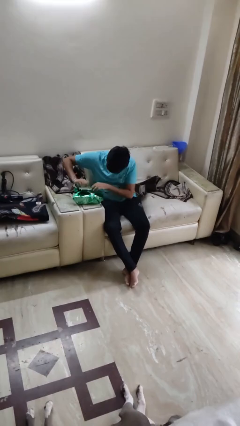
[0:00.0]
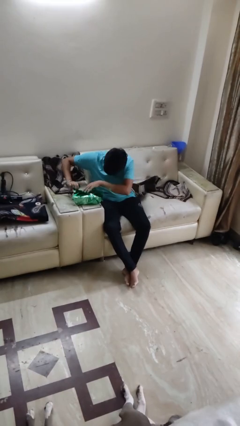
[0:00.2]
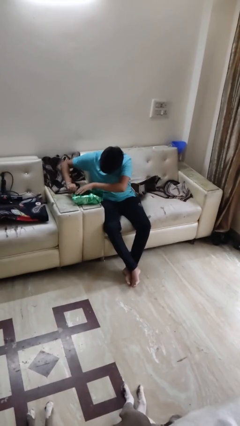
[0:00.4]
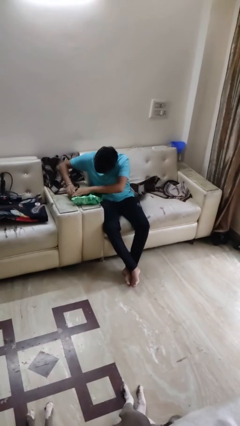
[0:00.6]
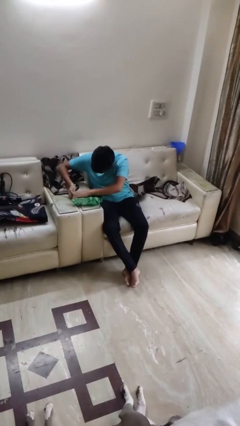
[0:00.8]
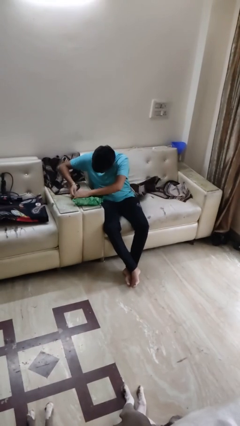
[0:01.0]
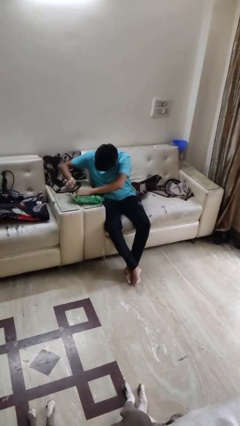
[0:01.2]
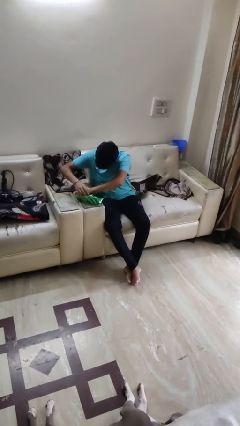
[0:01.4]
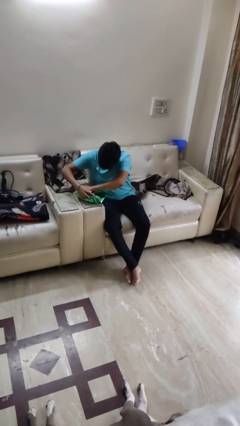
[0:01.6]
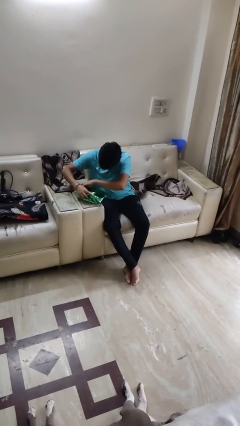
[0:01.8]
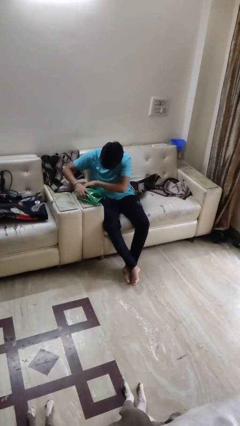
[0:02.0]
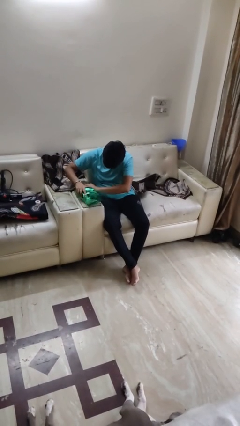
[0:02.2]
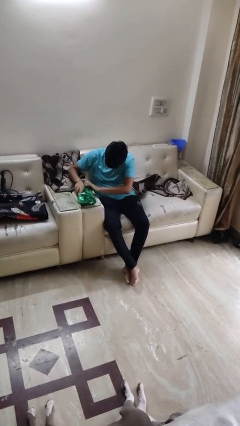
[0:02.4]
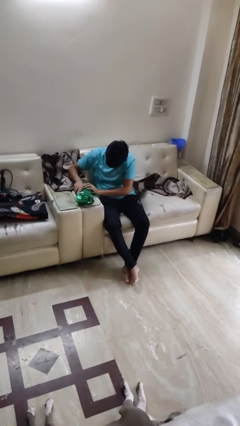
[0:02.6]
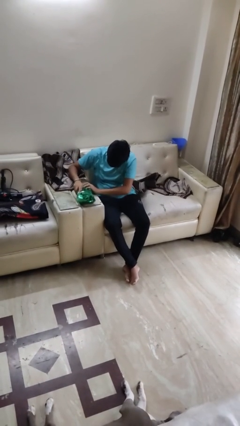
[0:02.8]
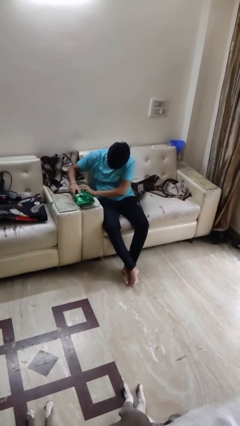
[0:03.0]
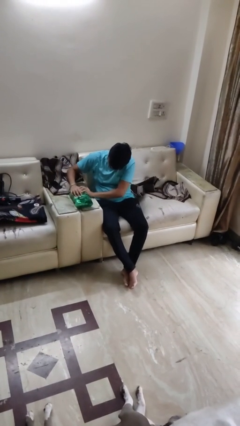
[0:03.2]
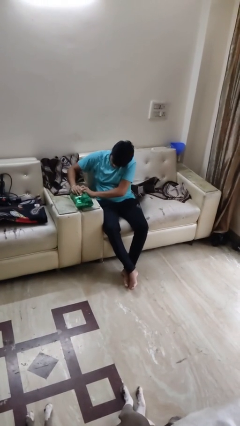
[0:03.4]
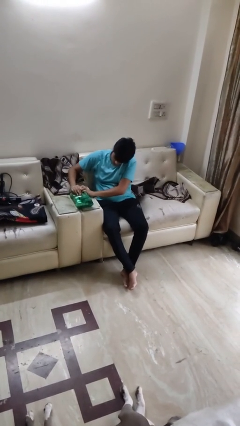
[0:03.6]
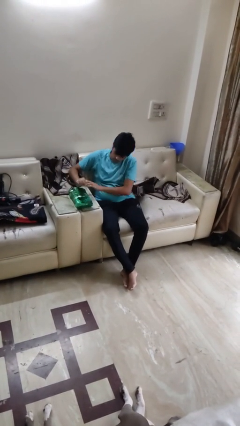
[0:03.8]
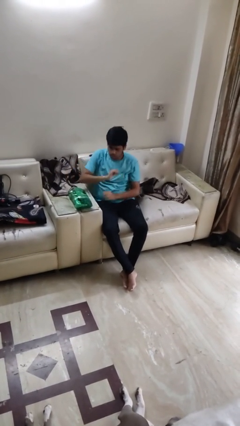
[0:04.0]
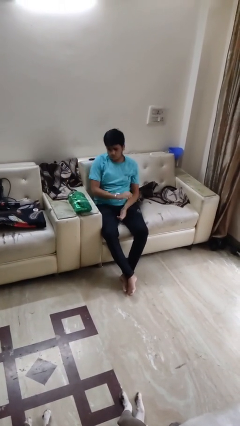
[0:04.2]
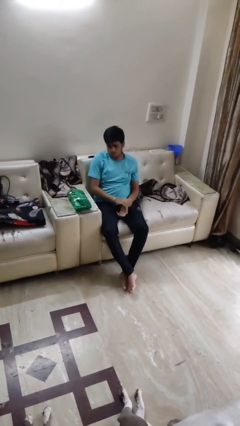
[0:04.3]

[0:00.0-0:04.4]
person wraps box

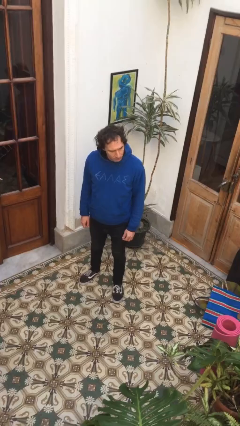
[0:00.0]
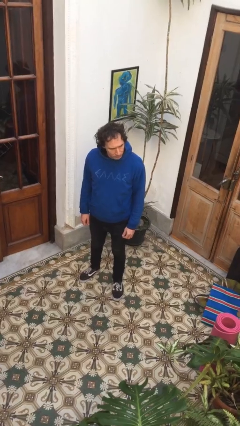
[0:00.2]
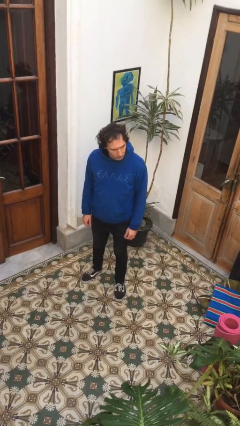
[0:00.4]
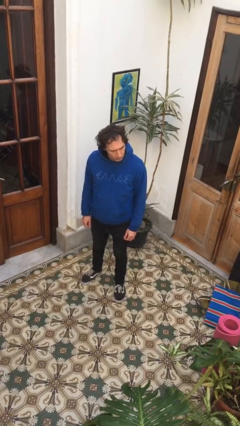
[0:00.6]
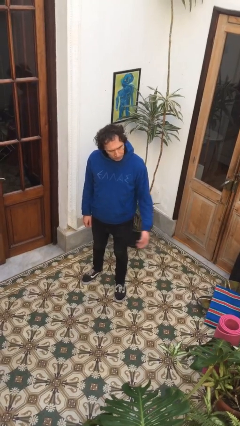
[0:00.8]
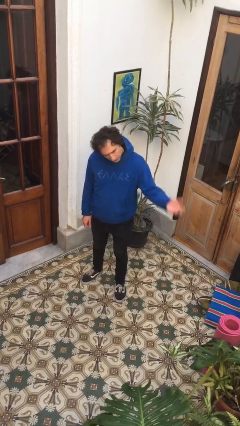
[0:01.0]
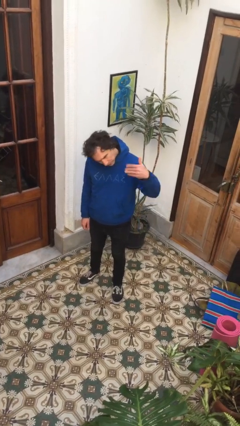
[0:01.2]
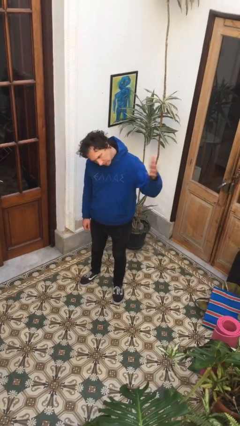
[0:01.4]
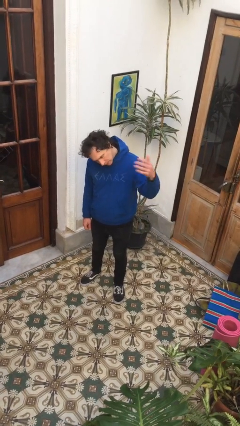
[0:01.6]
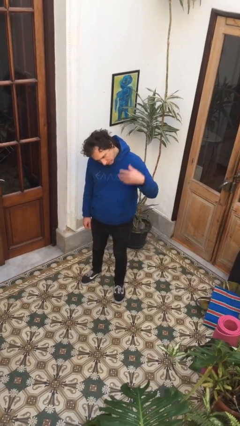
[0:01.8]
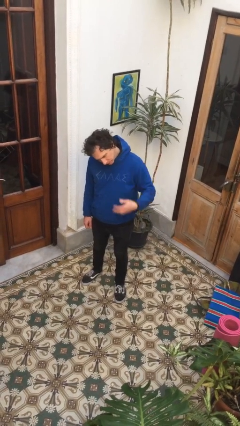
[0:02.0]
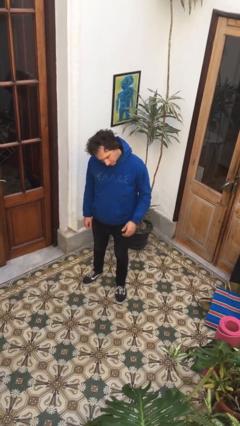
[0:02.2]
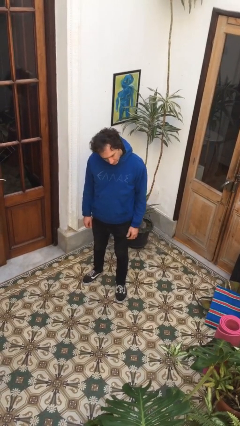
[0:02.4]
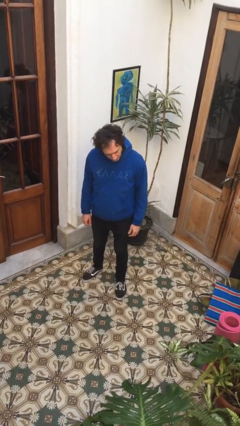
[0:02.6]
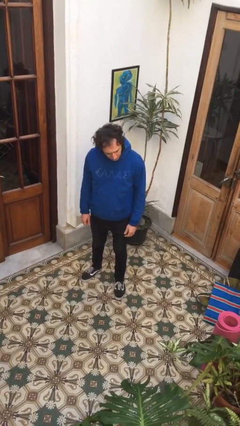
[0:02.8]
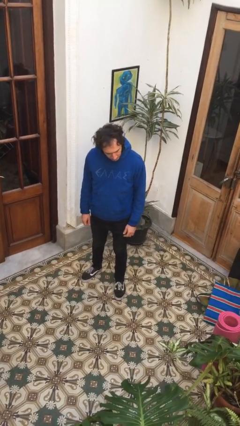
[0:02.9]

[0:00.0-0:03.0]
person gestures come here

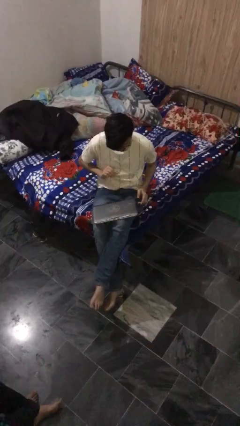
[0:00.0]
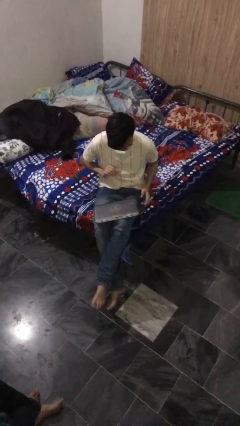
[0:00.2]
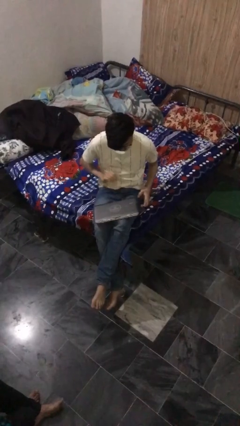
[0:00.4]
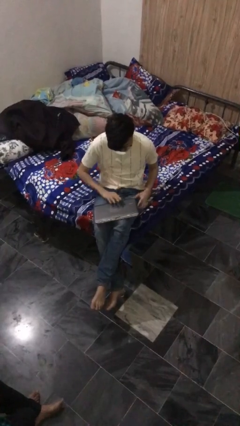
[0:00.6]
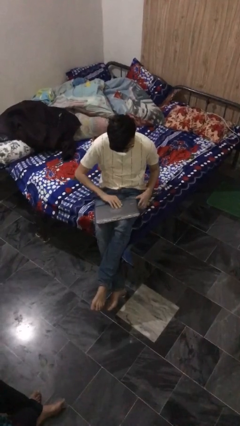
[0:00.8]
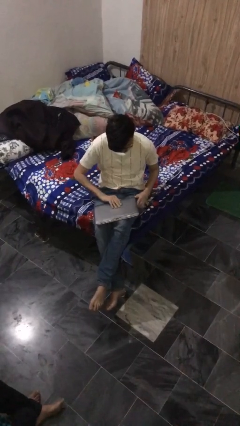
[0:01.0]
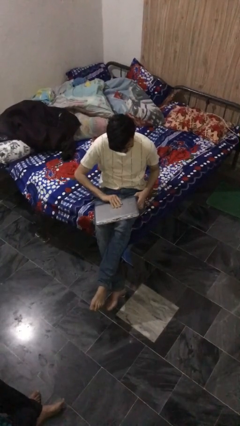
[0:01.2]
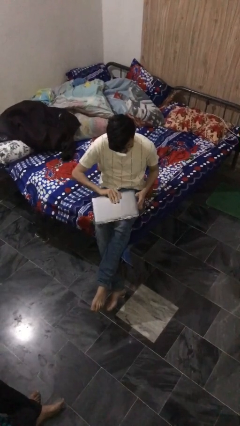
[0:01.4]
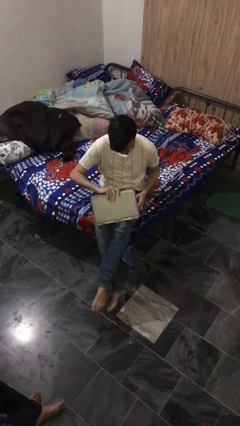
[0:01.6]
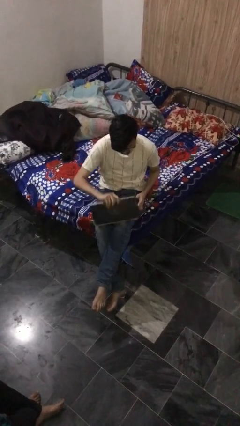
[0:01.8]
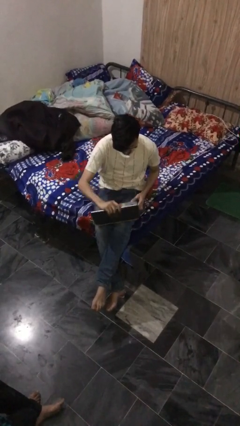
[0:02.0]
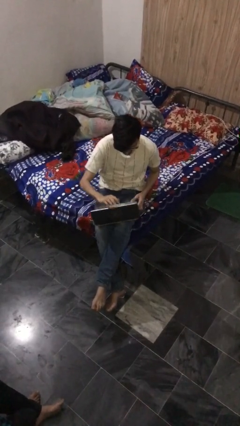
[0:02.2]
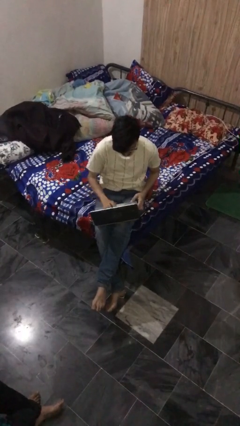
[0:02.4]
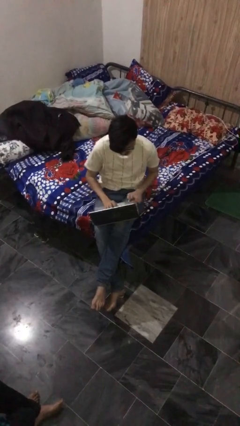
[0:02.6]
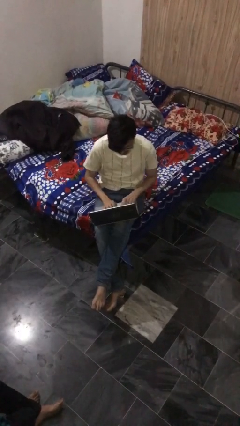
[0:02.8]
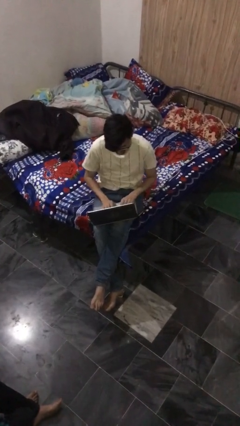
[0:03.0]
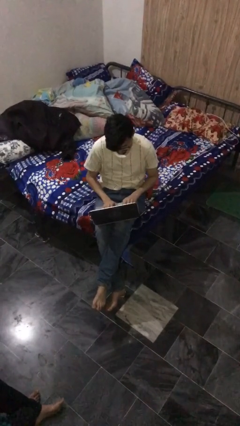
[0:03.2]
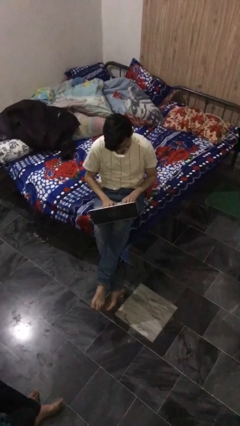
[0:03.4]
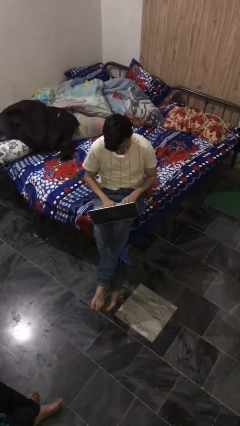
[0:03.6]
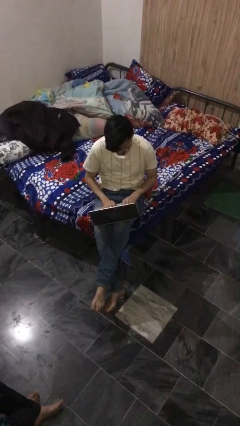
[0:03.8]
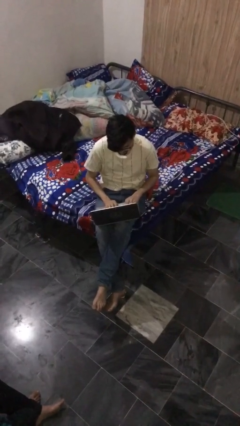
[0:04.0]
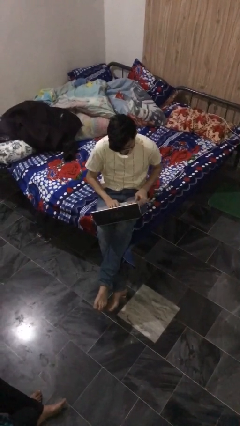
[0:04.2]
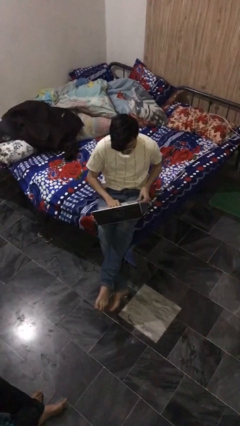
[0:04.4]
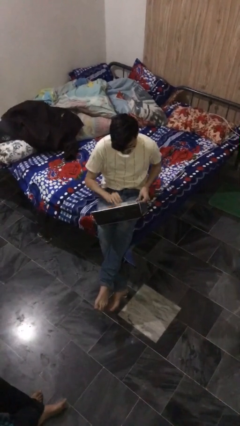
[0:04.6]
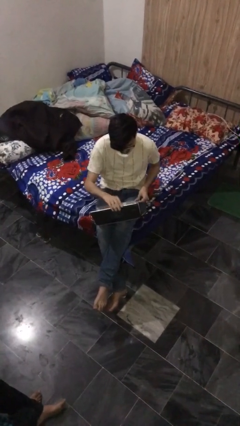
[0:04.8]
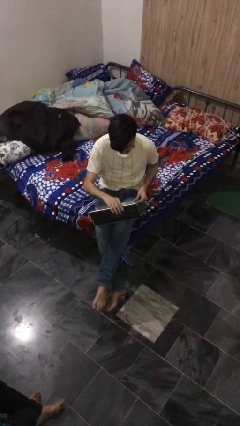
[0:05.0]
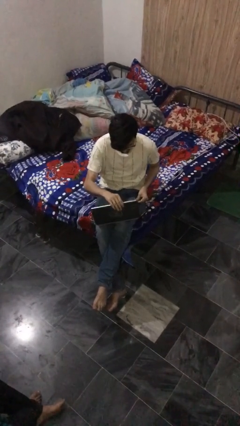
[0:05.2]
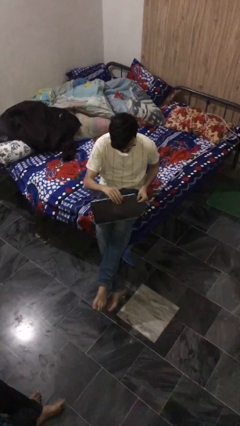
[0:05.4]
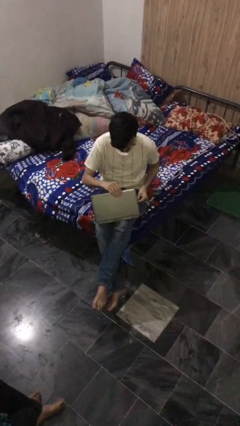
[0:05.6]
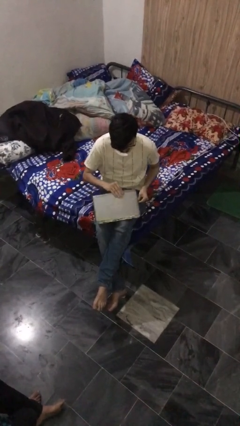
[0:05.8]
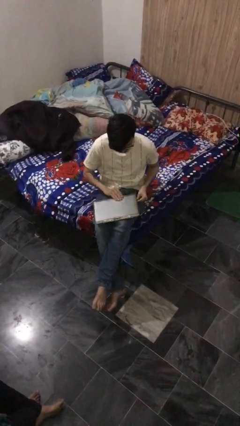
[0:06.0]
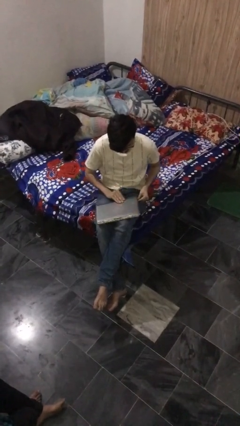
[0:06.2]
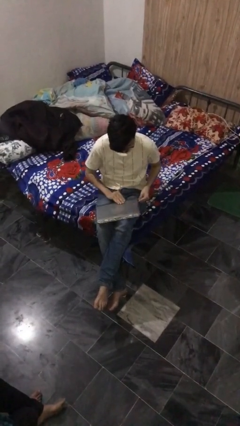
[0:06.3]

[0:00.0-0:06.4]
person interacts with laptop

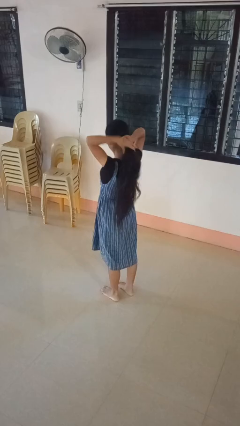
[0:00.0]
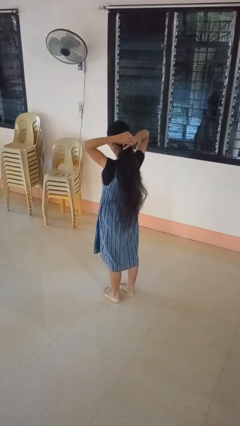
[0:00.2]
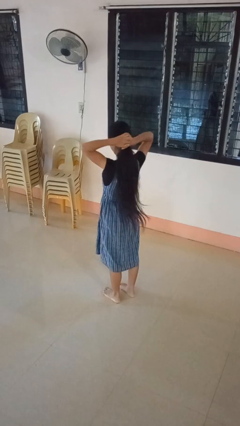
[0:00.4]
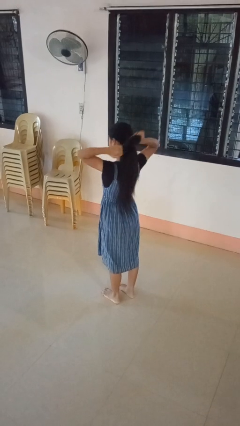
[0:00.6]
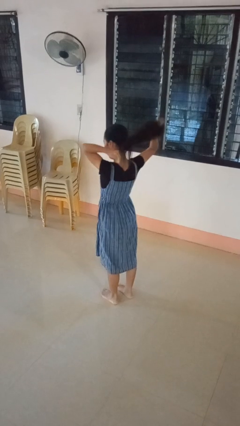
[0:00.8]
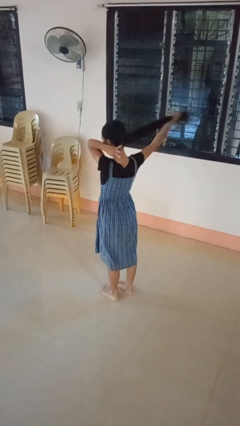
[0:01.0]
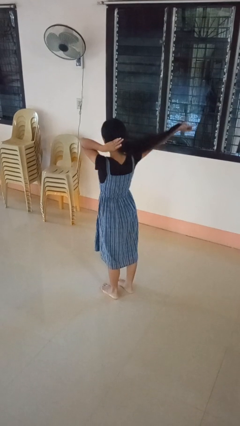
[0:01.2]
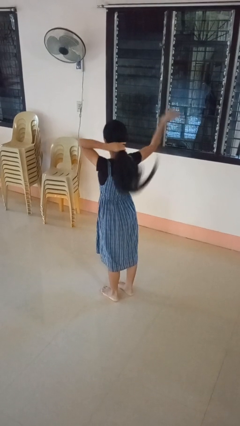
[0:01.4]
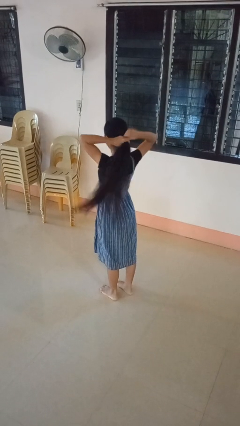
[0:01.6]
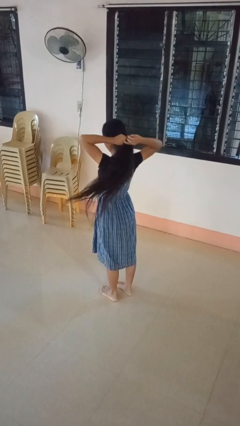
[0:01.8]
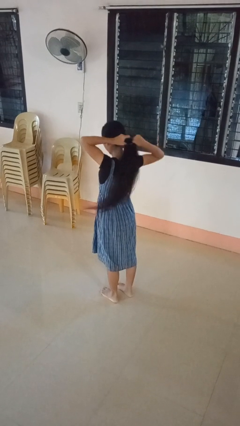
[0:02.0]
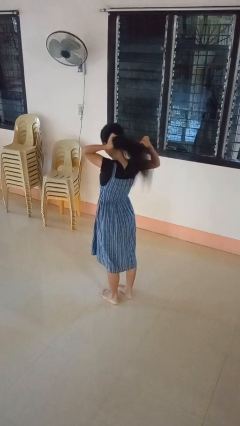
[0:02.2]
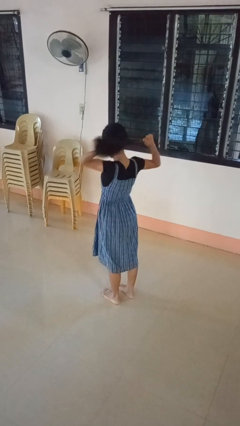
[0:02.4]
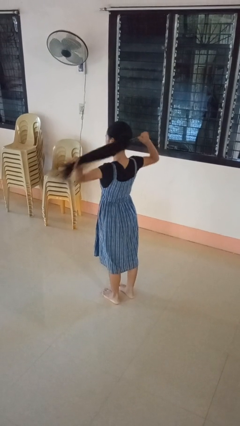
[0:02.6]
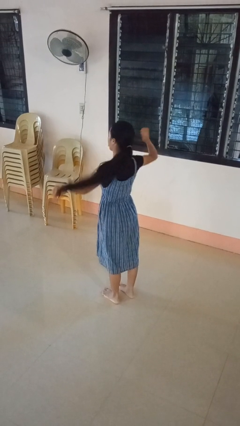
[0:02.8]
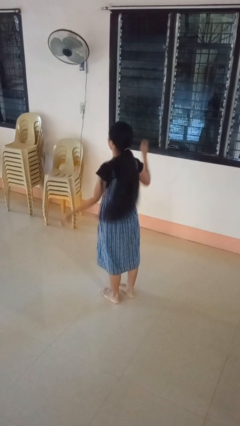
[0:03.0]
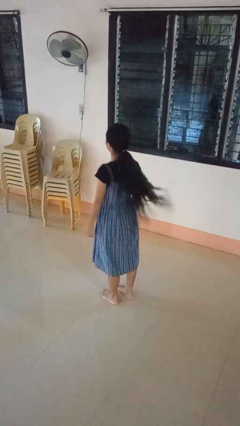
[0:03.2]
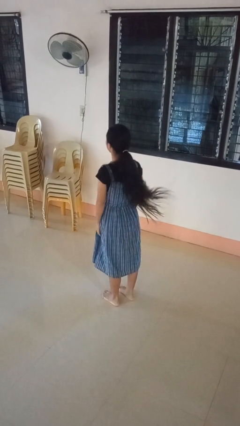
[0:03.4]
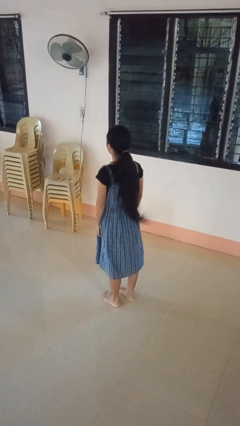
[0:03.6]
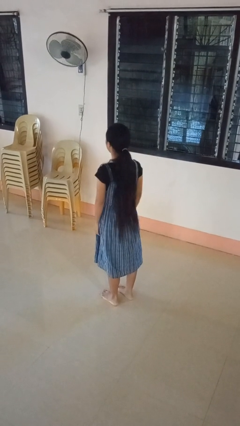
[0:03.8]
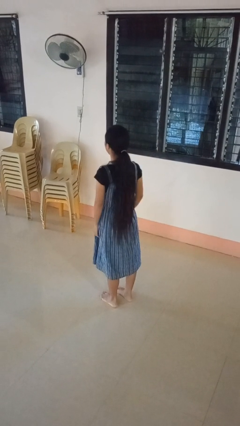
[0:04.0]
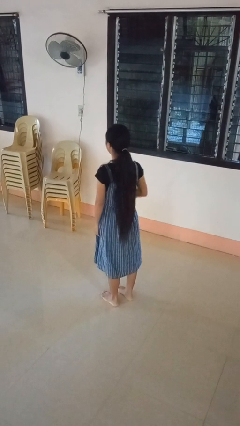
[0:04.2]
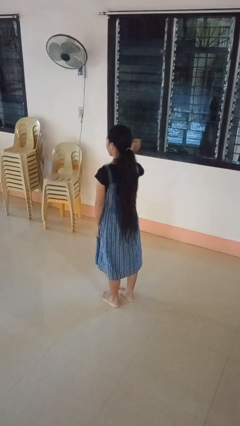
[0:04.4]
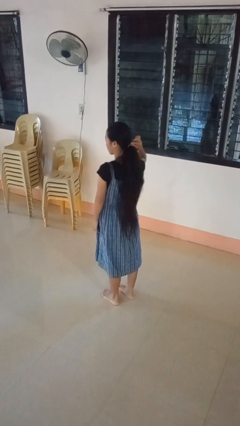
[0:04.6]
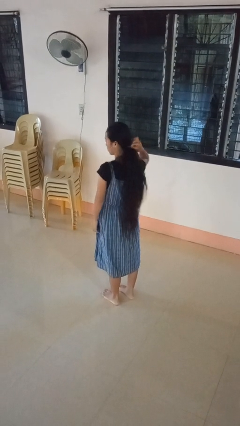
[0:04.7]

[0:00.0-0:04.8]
person puts hair in ponytail
